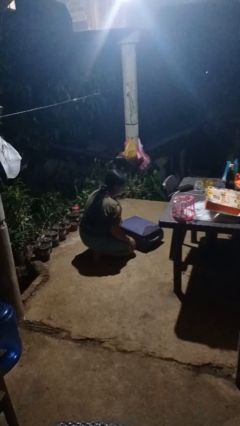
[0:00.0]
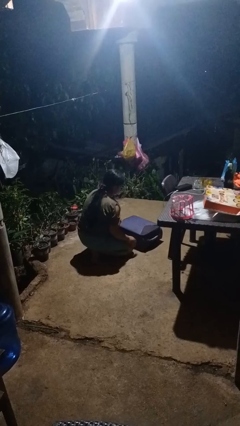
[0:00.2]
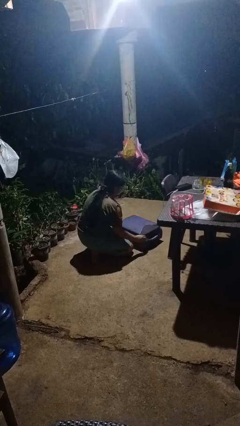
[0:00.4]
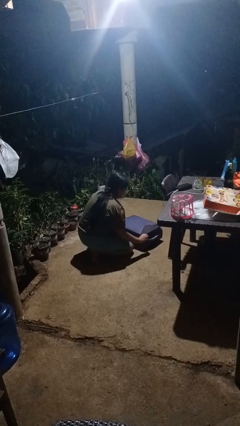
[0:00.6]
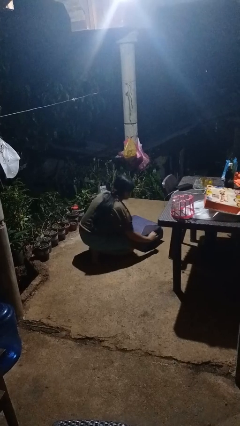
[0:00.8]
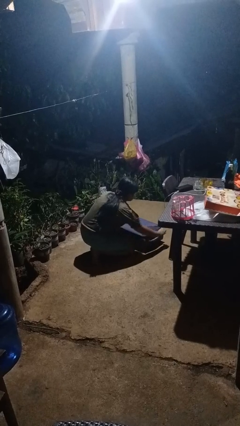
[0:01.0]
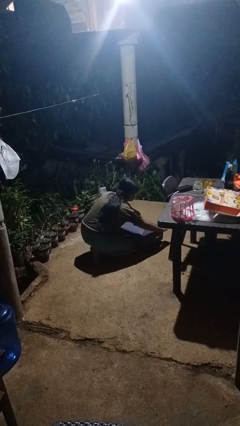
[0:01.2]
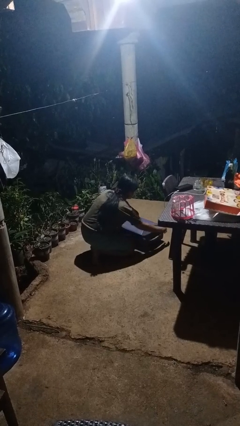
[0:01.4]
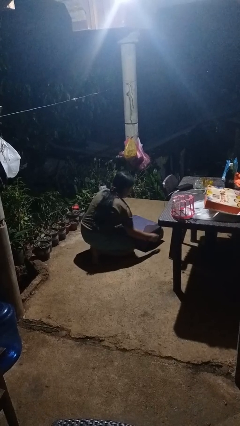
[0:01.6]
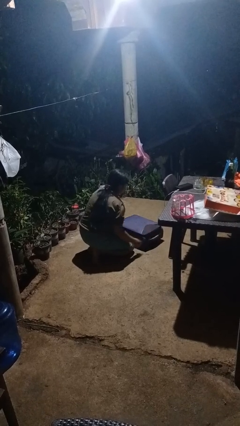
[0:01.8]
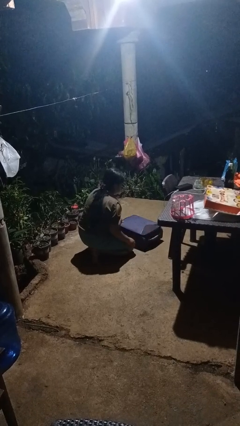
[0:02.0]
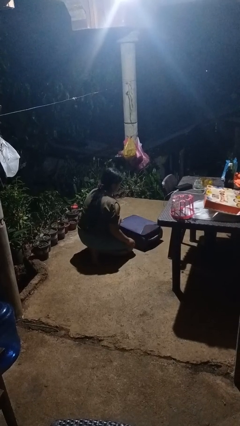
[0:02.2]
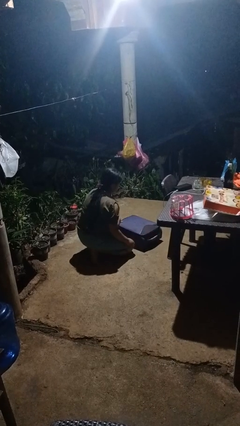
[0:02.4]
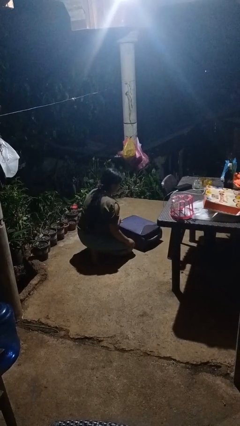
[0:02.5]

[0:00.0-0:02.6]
person opens suitcase

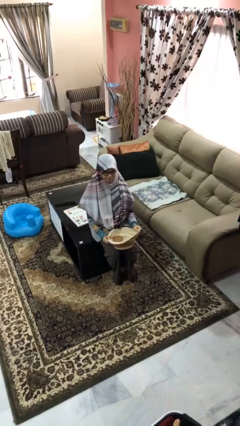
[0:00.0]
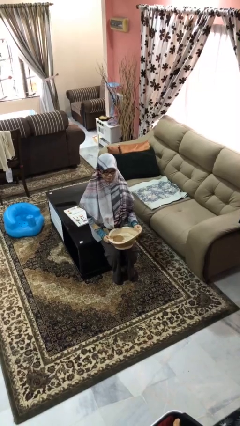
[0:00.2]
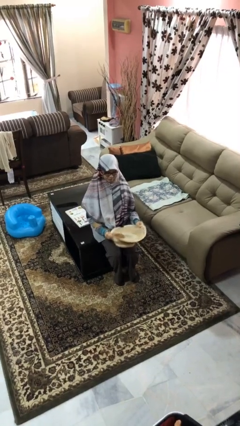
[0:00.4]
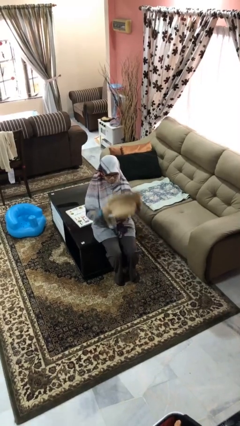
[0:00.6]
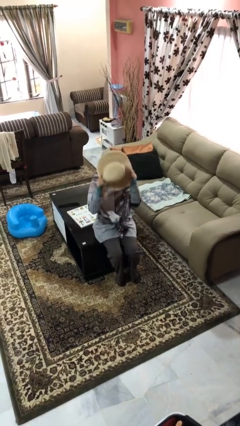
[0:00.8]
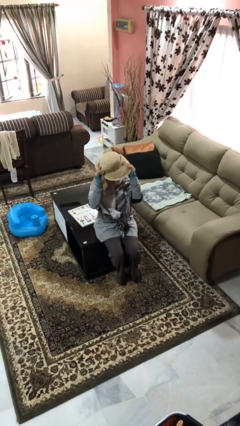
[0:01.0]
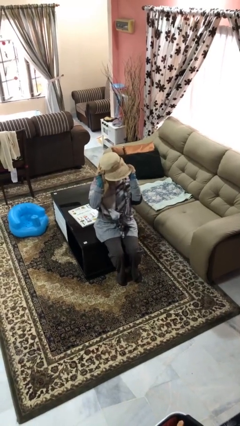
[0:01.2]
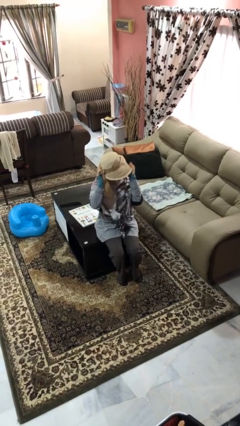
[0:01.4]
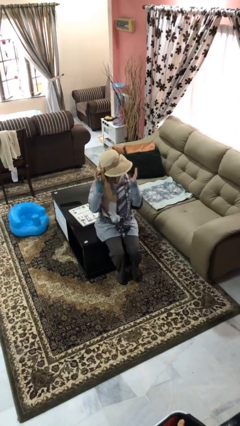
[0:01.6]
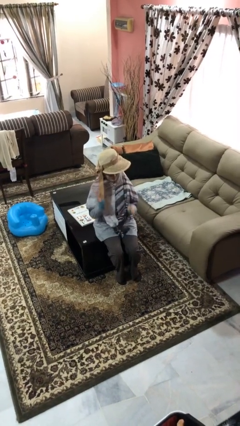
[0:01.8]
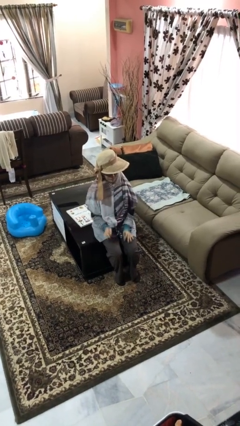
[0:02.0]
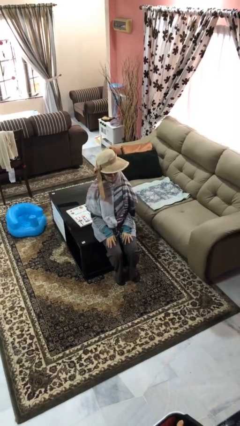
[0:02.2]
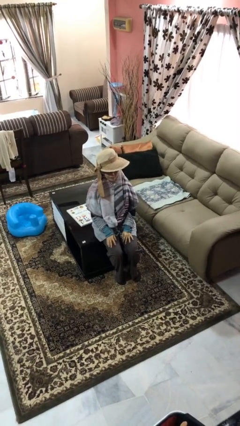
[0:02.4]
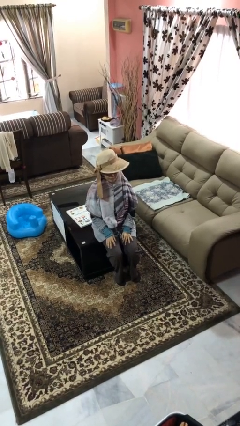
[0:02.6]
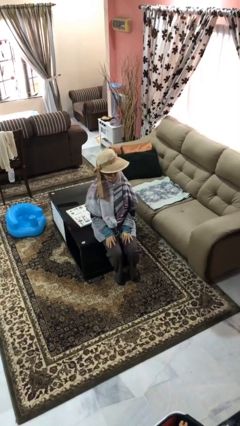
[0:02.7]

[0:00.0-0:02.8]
person puts on hat

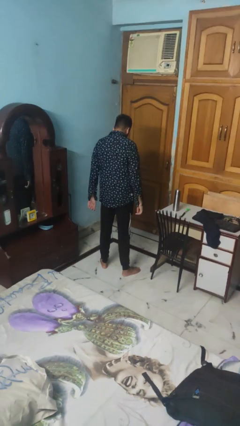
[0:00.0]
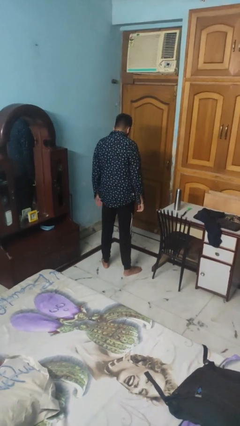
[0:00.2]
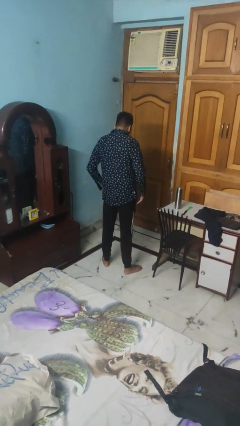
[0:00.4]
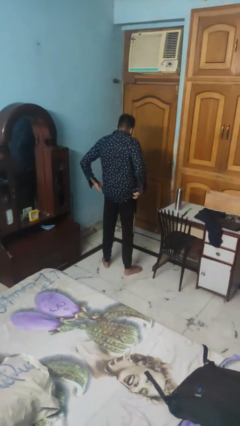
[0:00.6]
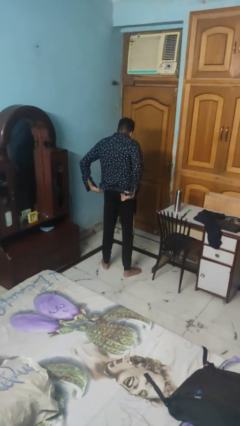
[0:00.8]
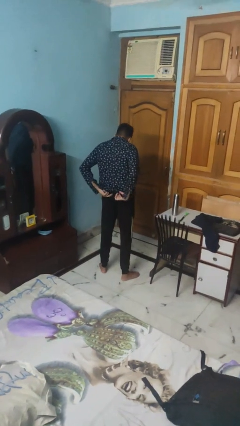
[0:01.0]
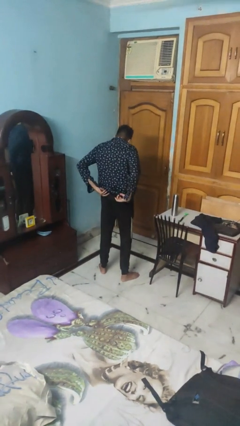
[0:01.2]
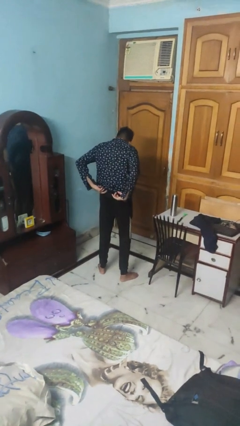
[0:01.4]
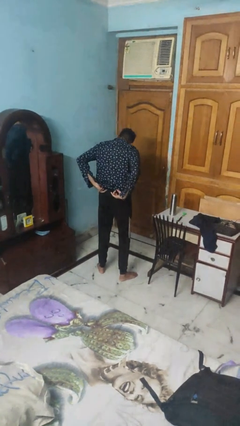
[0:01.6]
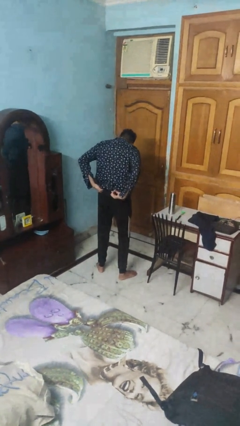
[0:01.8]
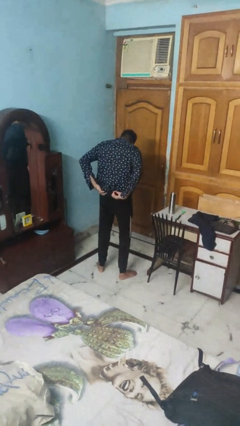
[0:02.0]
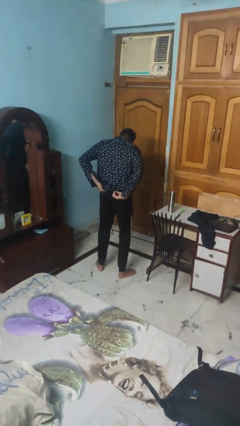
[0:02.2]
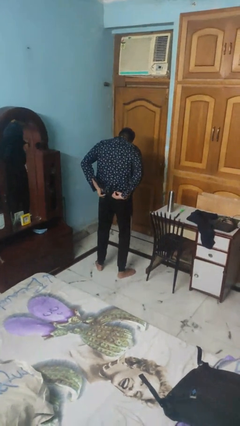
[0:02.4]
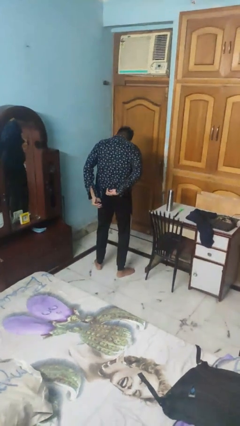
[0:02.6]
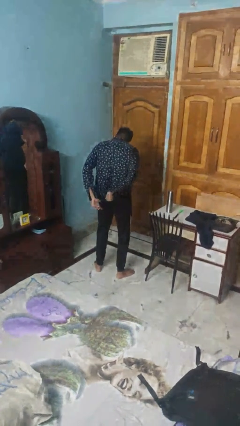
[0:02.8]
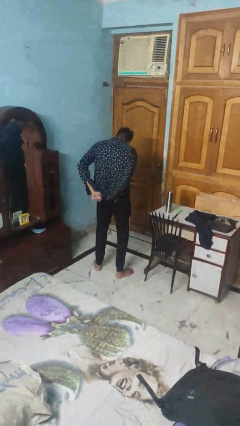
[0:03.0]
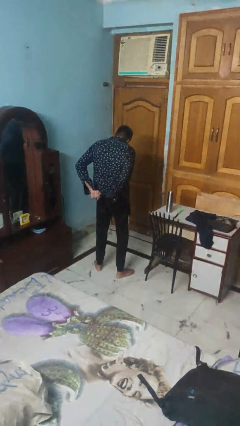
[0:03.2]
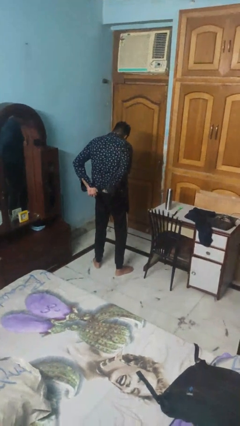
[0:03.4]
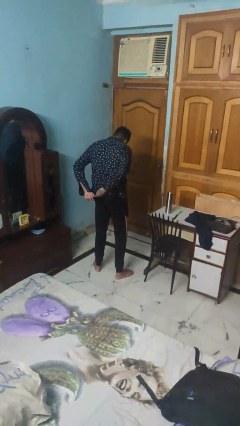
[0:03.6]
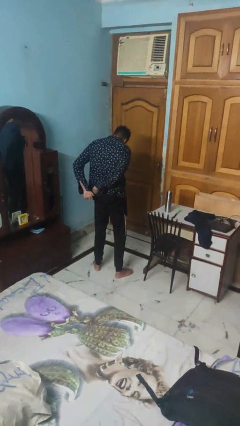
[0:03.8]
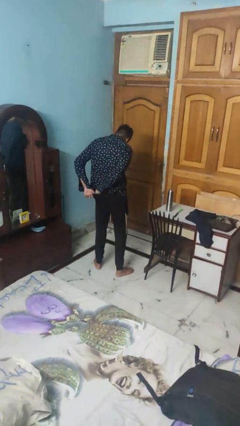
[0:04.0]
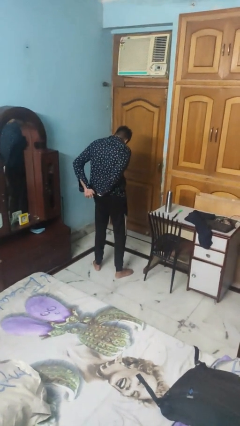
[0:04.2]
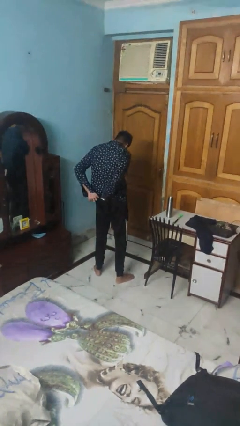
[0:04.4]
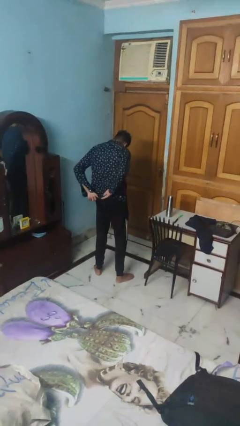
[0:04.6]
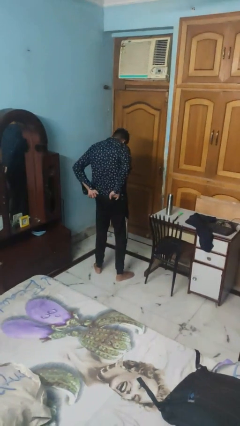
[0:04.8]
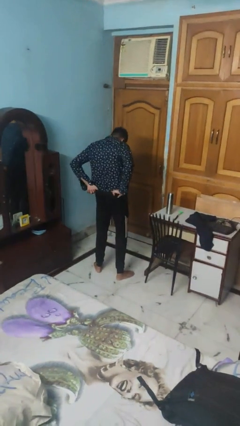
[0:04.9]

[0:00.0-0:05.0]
person tucks in shirt

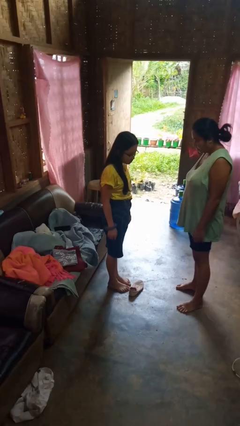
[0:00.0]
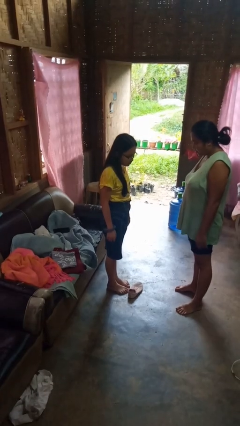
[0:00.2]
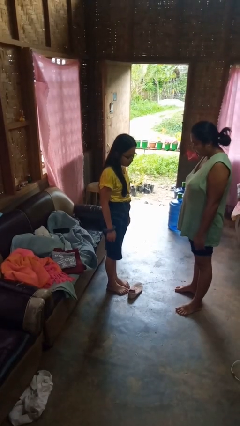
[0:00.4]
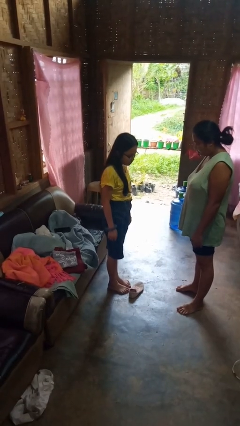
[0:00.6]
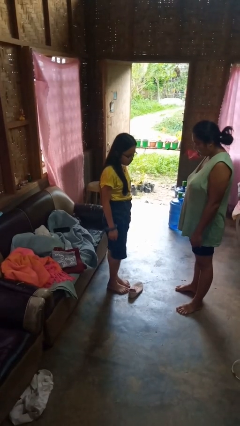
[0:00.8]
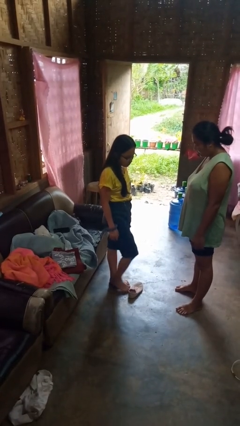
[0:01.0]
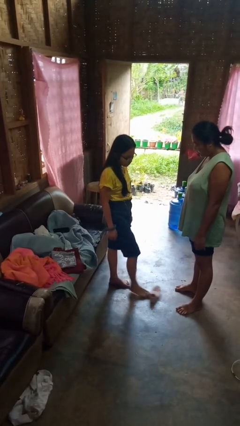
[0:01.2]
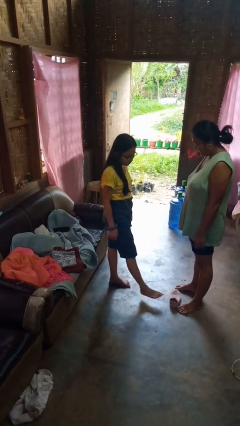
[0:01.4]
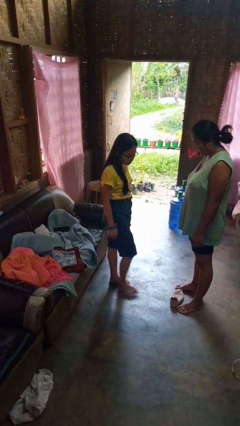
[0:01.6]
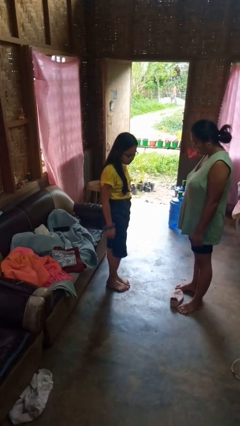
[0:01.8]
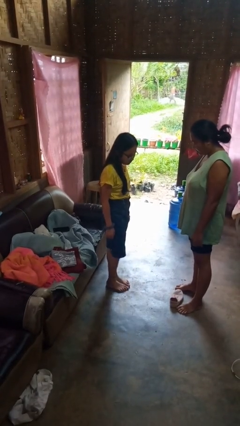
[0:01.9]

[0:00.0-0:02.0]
person kicks object to person

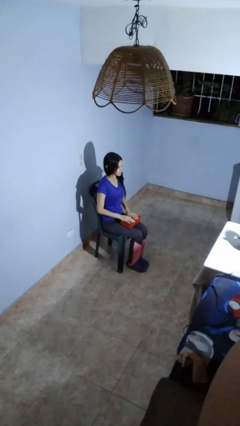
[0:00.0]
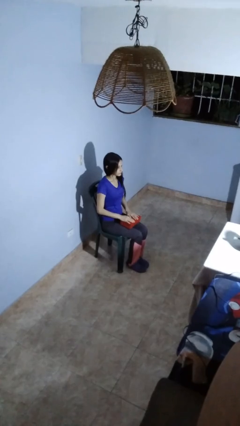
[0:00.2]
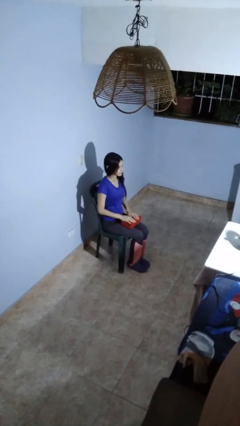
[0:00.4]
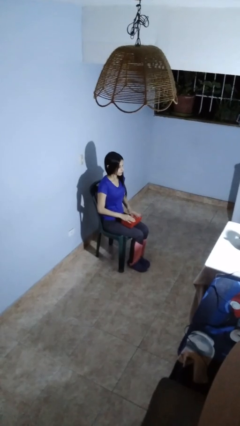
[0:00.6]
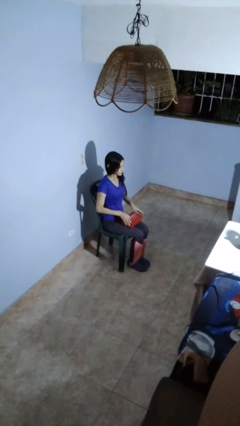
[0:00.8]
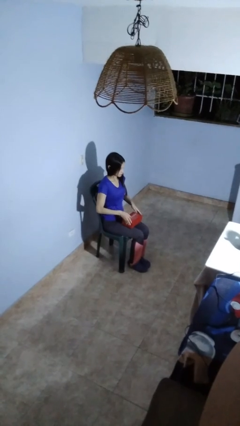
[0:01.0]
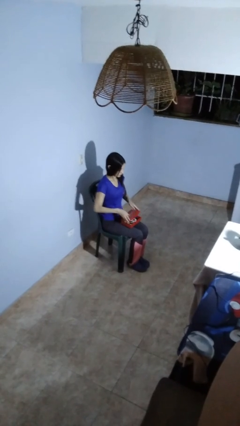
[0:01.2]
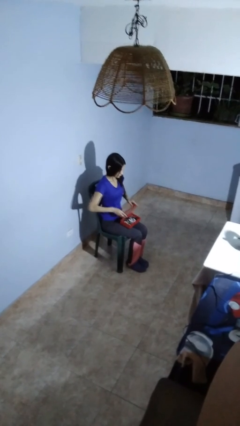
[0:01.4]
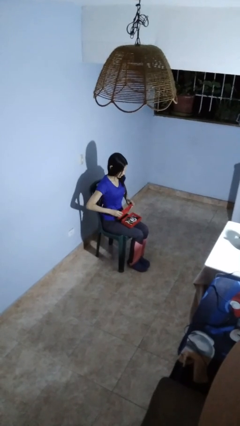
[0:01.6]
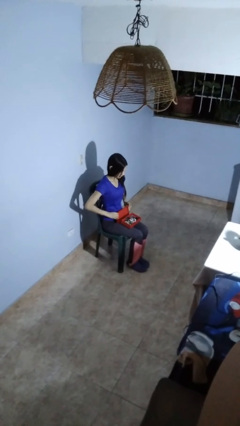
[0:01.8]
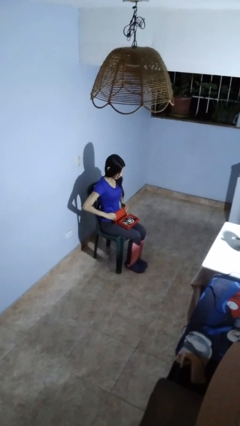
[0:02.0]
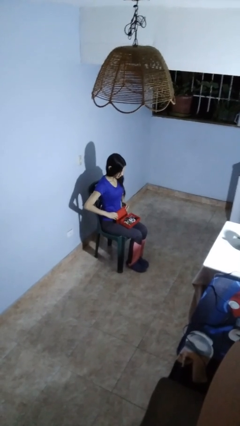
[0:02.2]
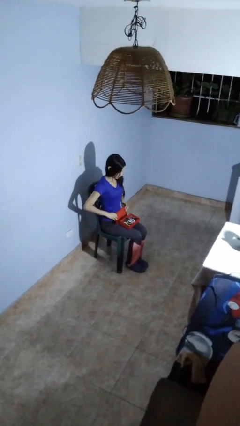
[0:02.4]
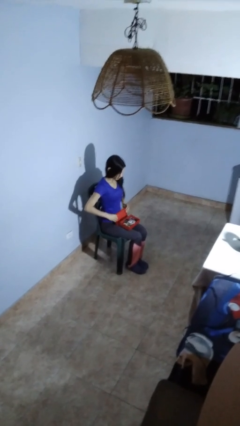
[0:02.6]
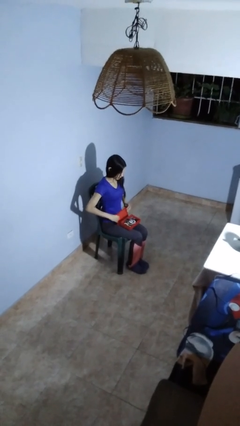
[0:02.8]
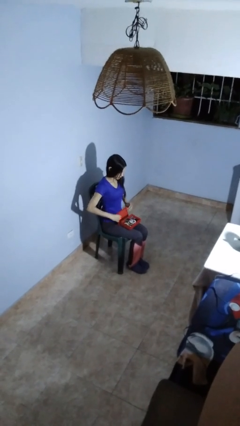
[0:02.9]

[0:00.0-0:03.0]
person opens jewelry box

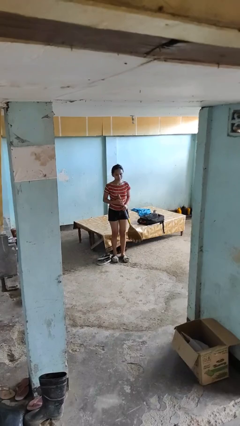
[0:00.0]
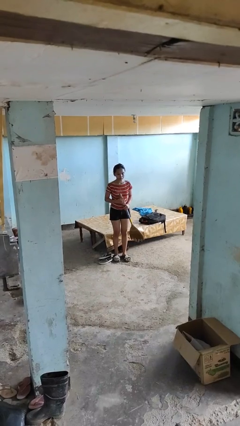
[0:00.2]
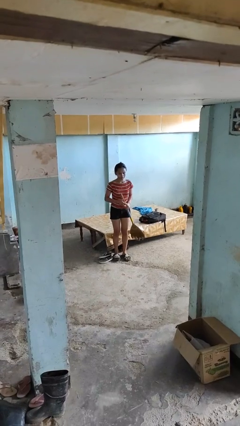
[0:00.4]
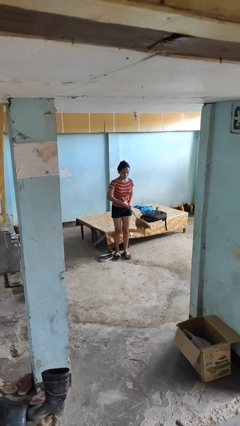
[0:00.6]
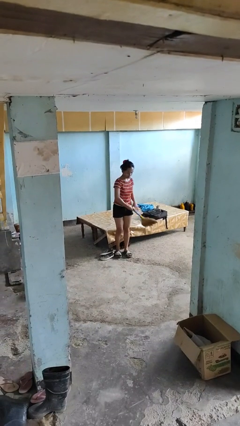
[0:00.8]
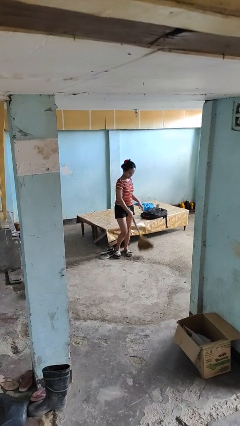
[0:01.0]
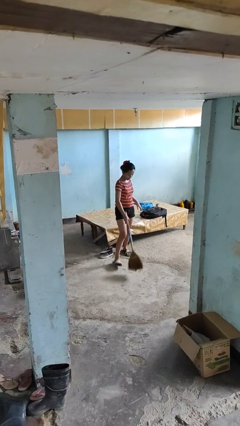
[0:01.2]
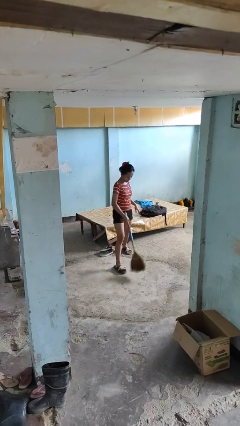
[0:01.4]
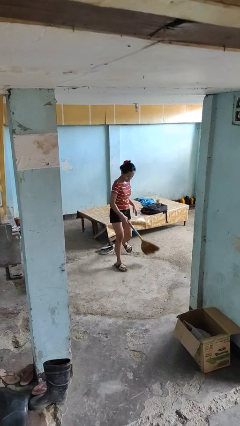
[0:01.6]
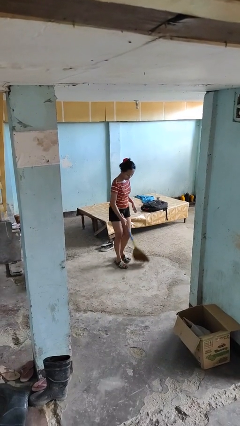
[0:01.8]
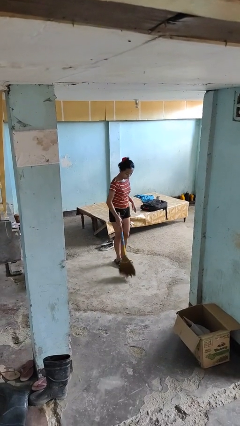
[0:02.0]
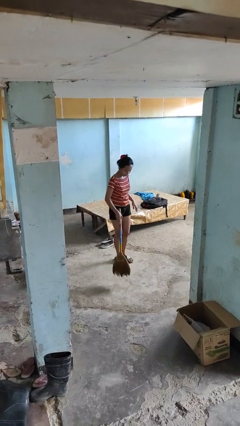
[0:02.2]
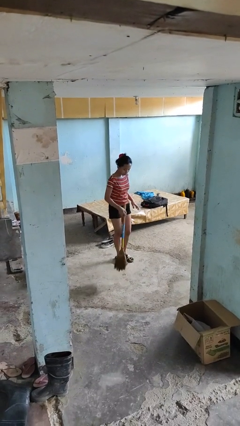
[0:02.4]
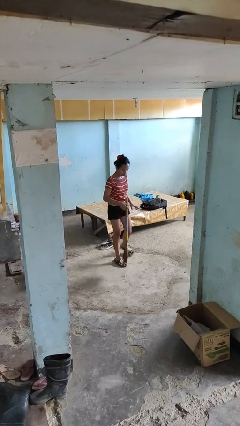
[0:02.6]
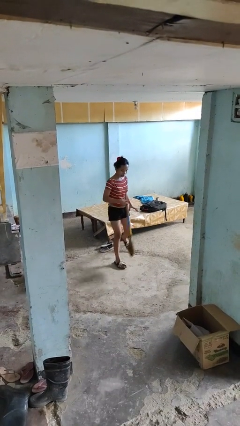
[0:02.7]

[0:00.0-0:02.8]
person sweeps floor
